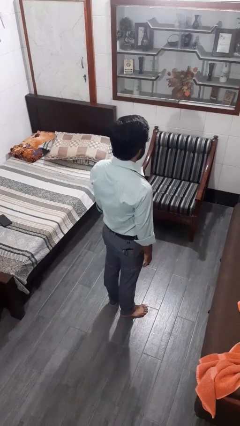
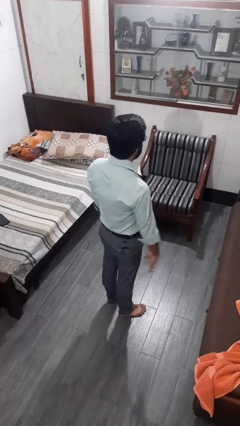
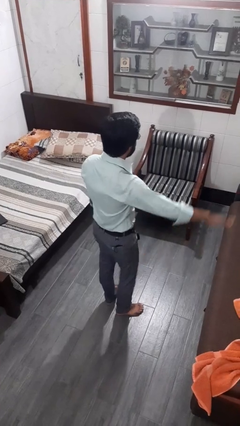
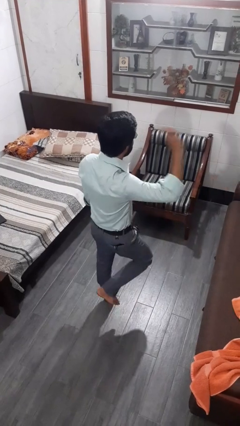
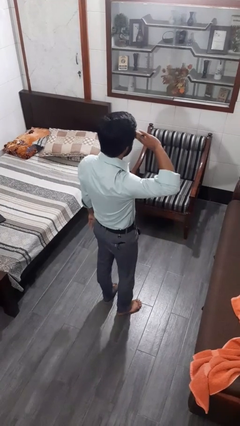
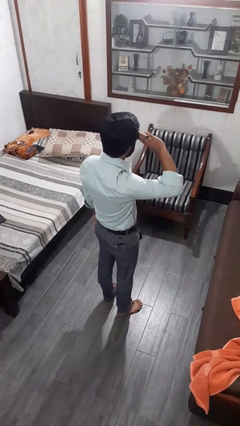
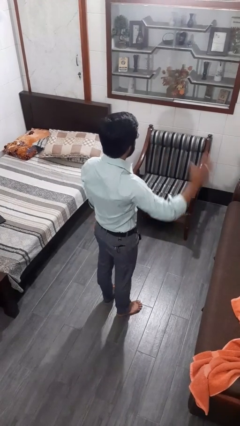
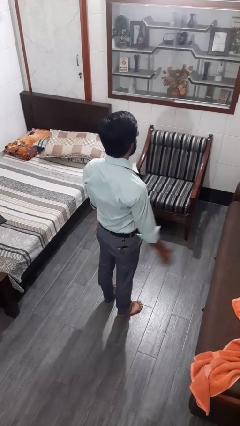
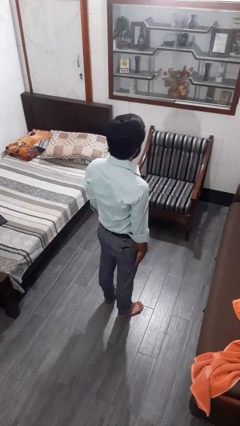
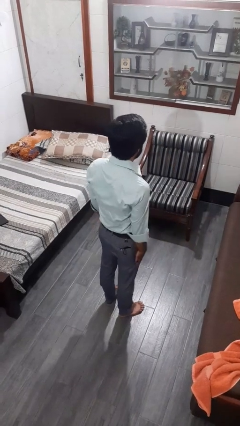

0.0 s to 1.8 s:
person salutes

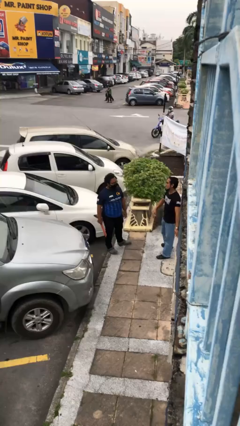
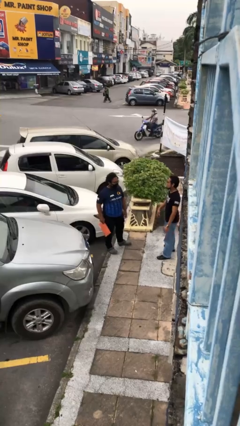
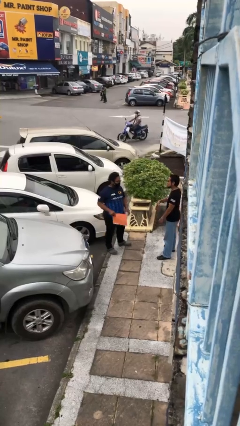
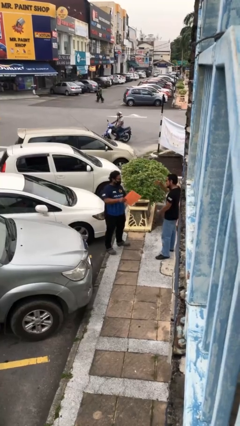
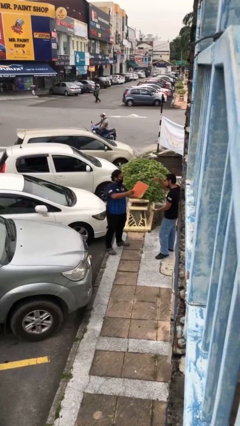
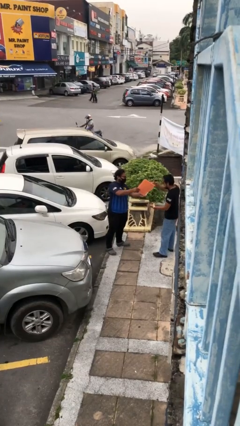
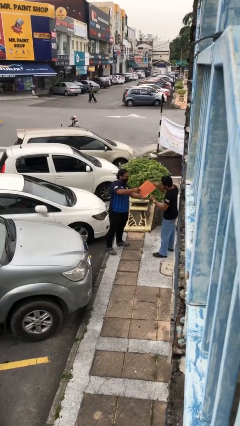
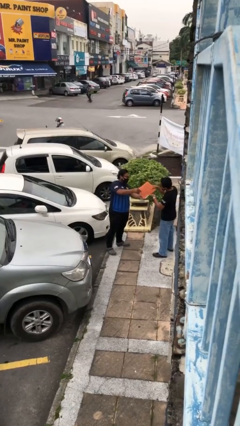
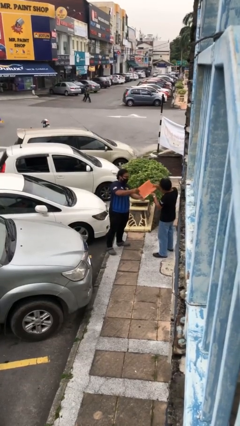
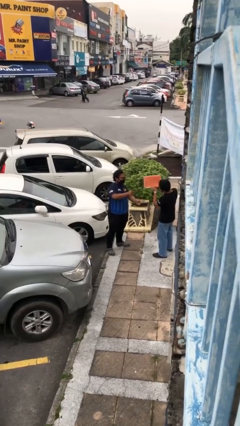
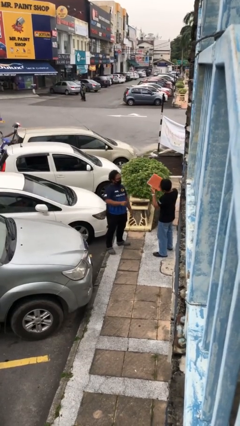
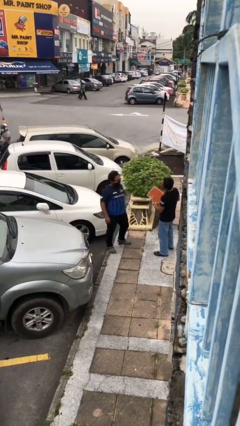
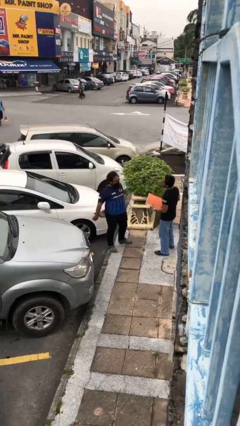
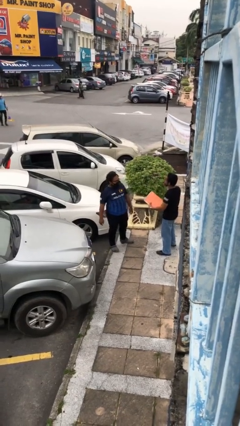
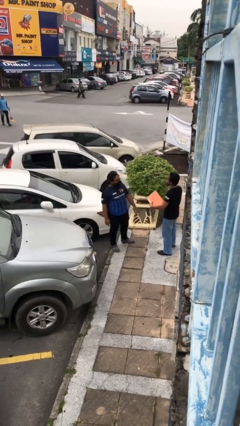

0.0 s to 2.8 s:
person transfers object to person

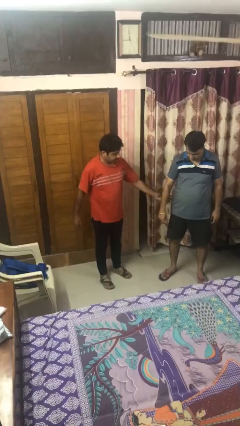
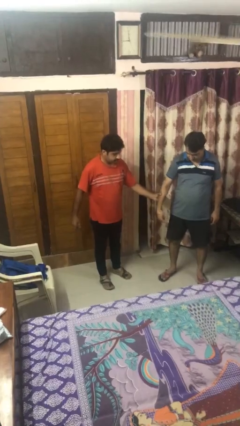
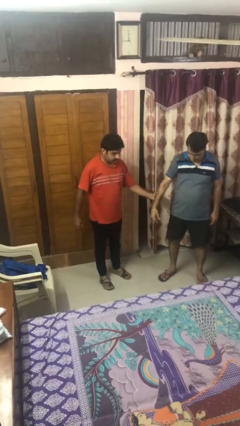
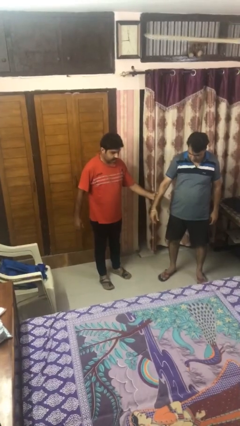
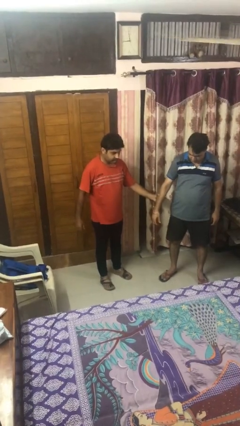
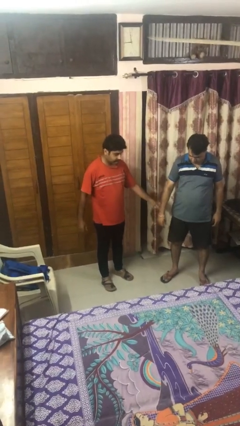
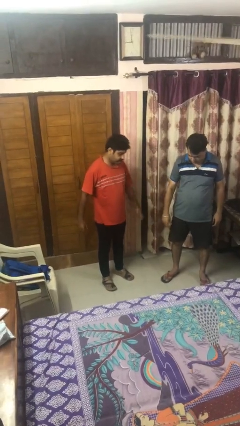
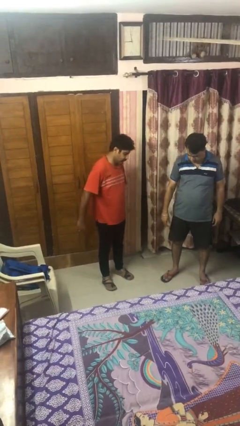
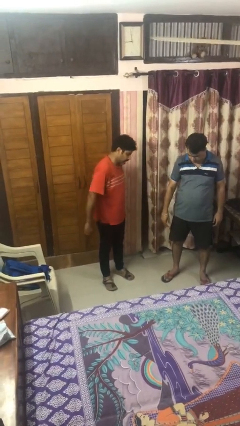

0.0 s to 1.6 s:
person grabs person by forearm

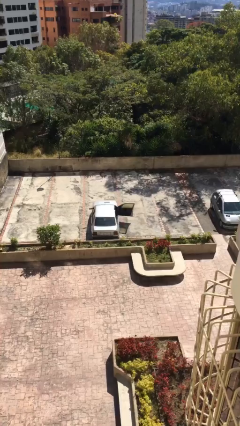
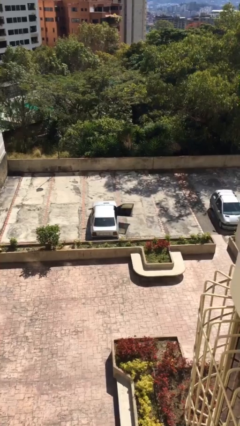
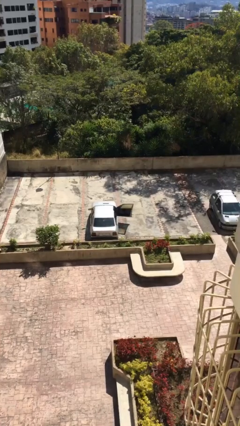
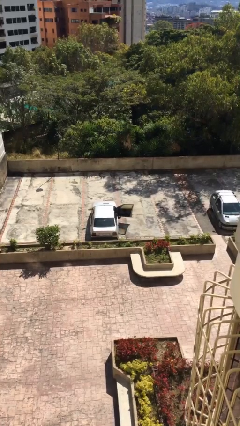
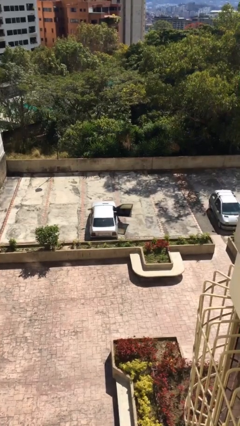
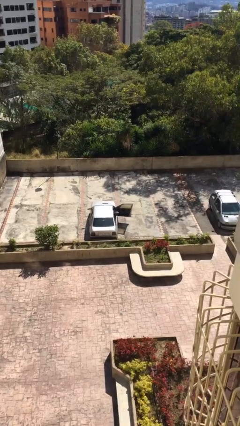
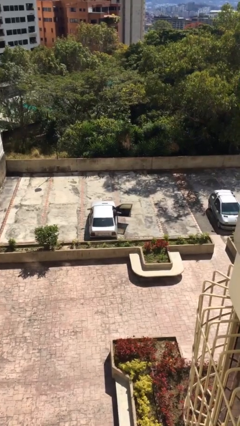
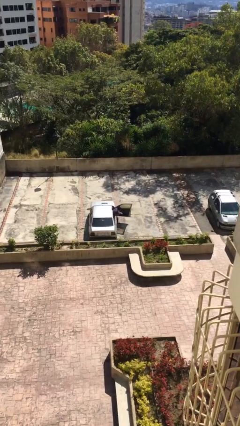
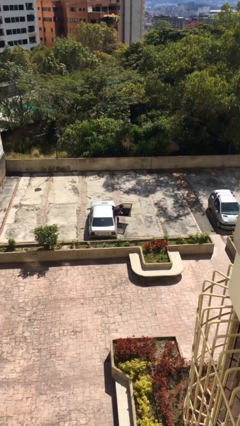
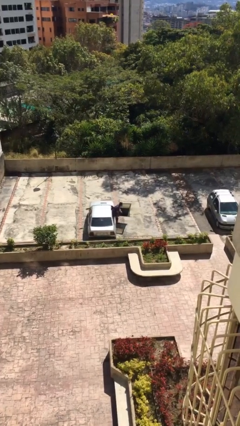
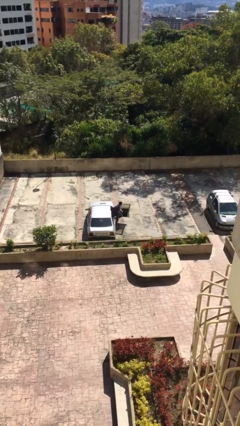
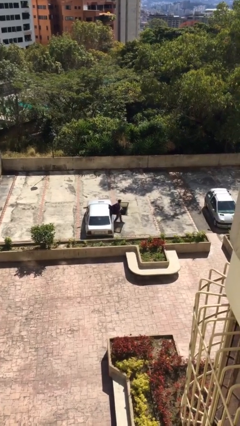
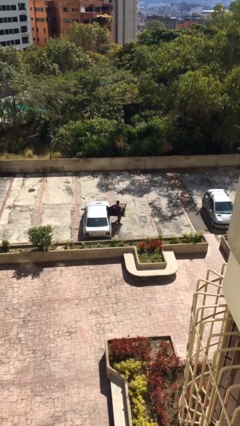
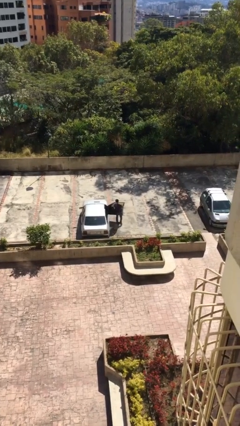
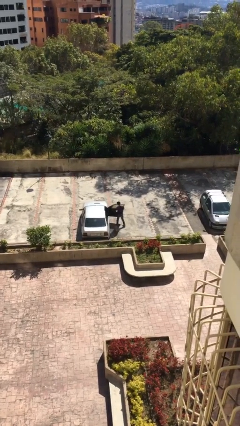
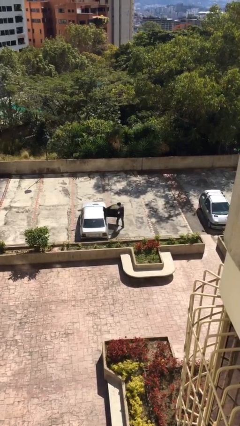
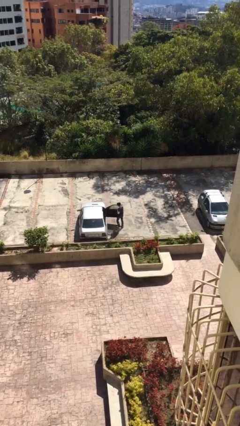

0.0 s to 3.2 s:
person exits car

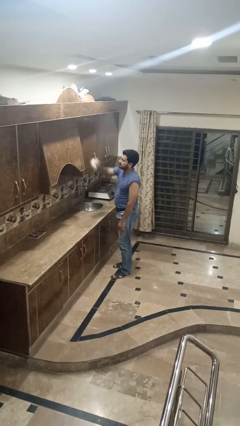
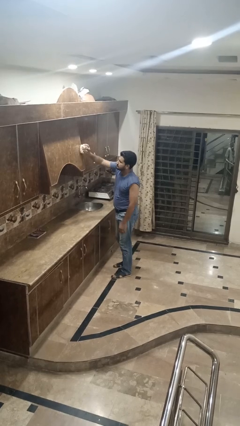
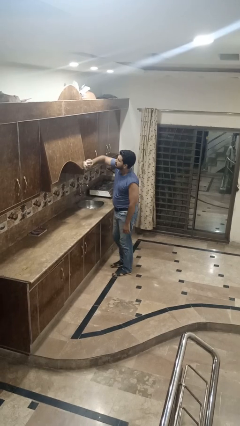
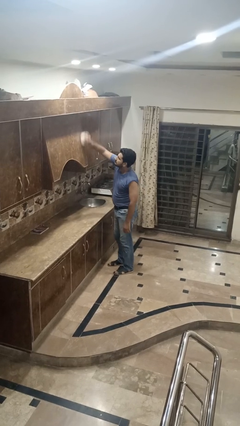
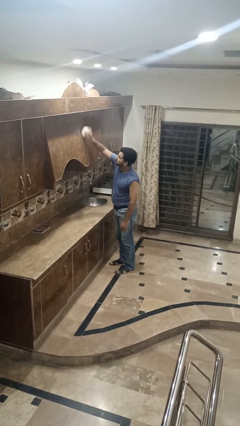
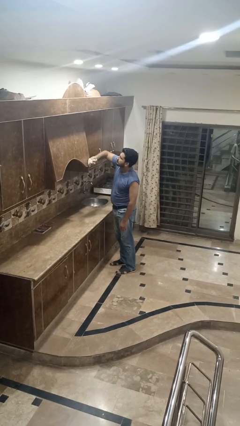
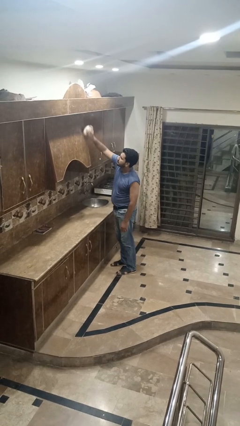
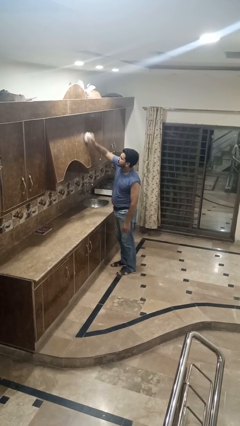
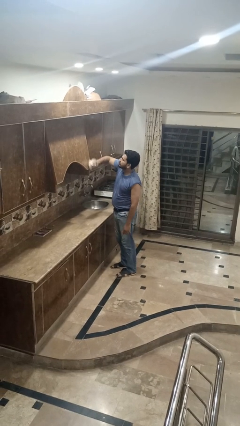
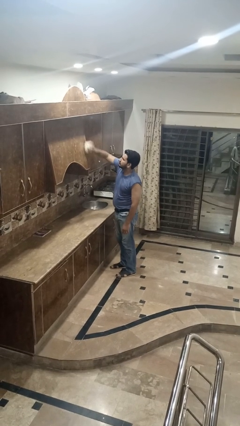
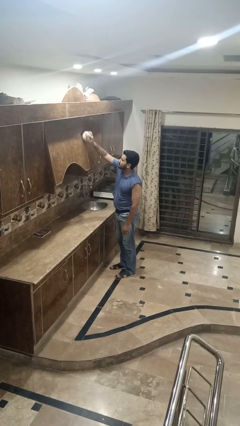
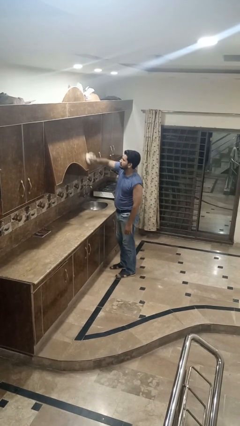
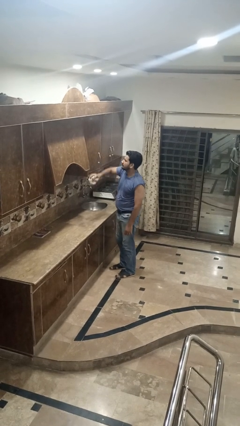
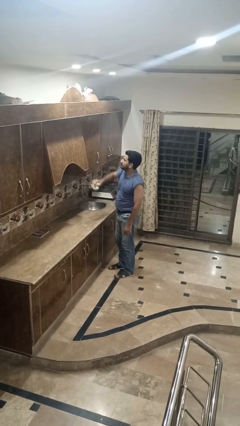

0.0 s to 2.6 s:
person dusts furniture

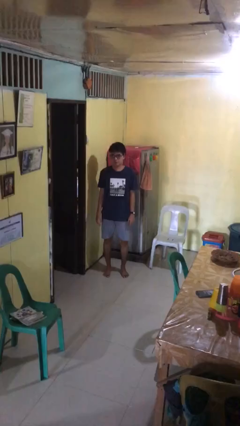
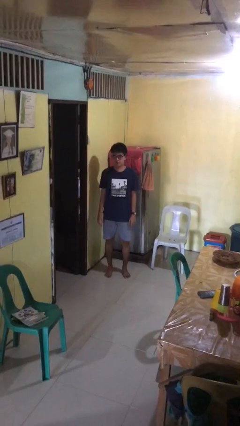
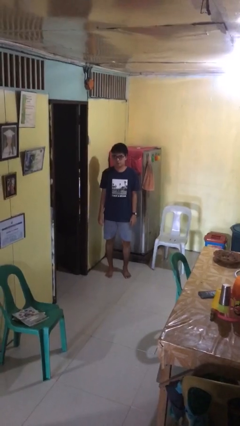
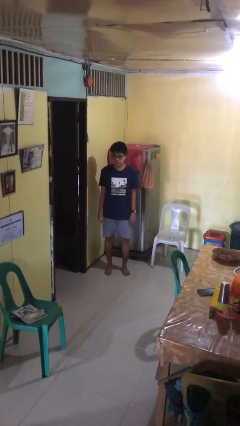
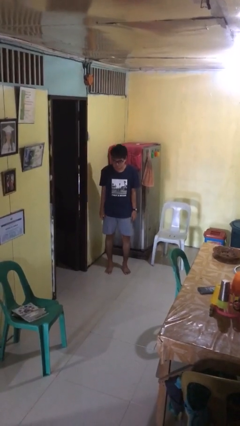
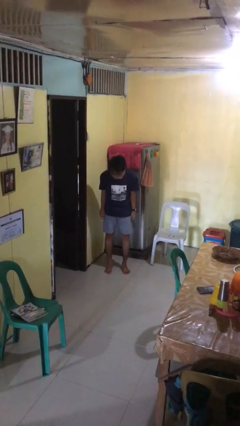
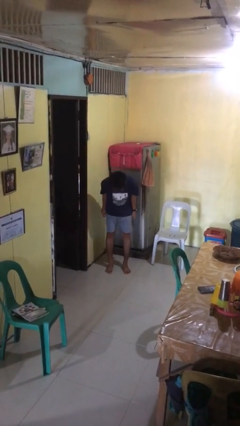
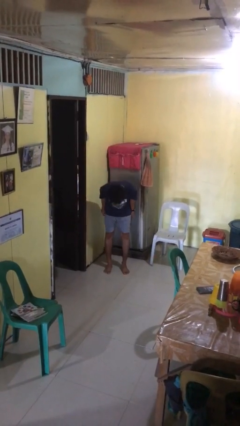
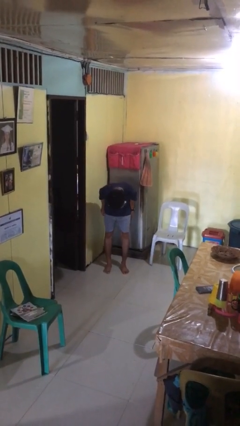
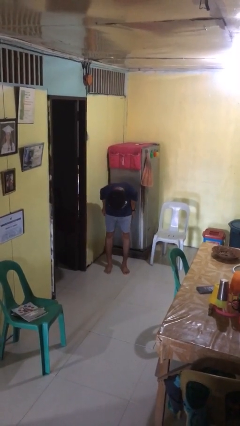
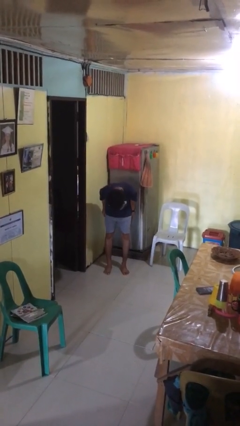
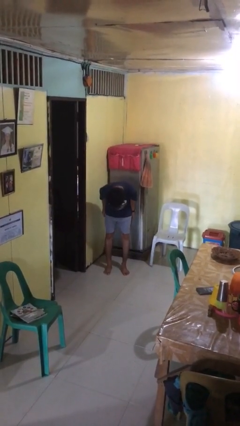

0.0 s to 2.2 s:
person bows

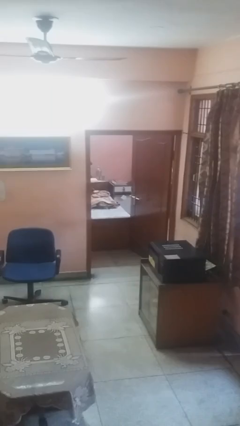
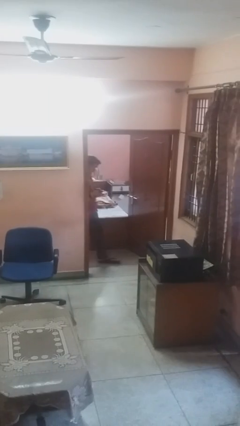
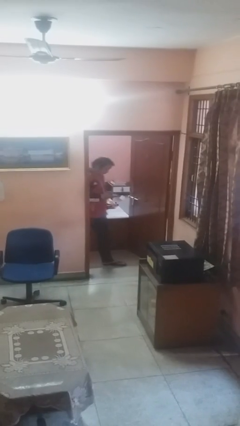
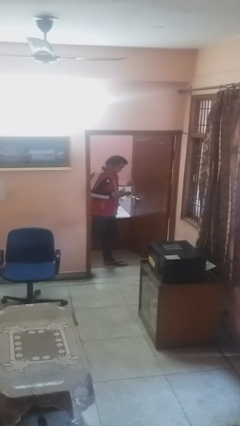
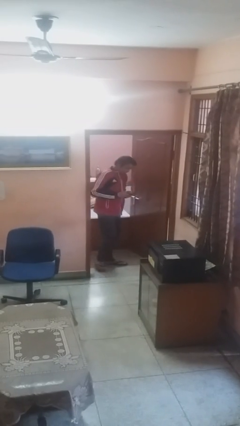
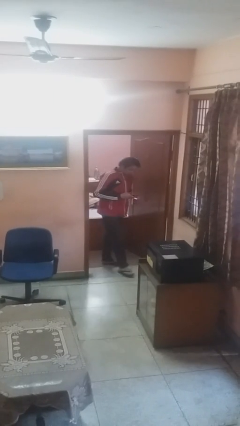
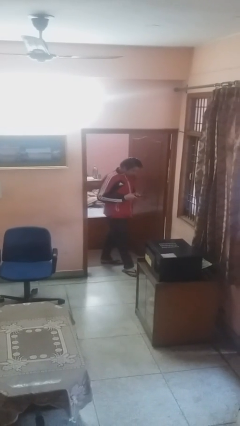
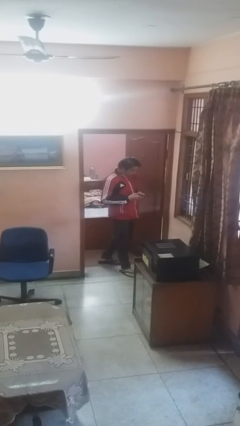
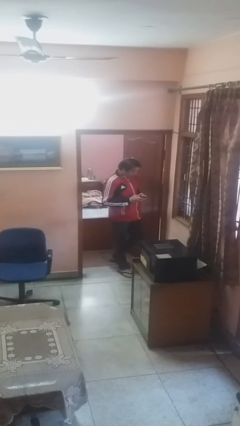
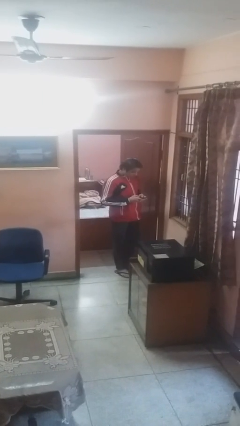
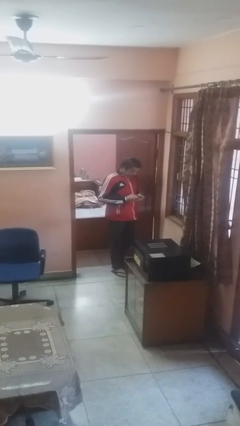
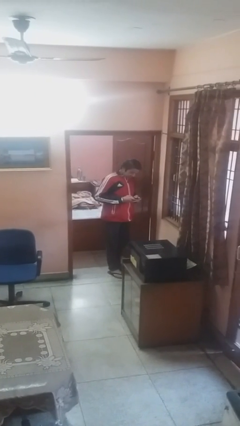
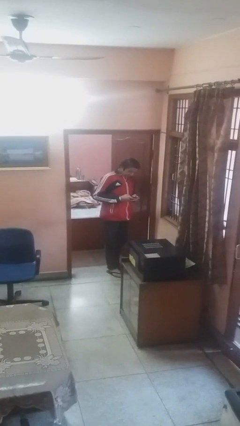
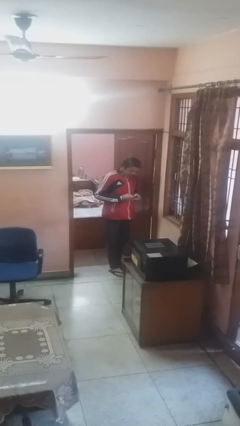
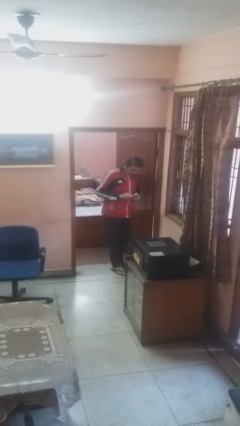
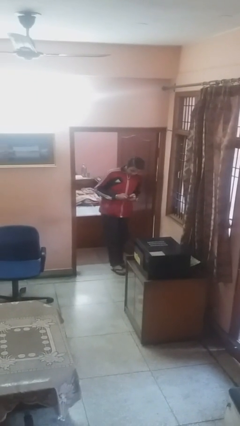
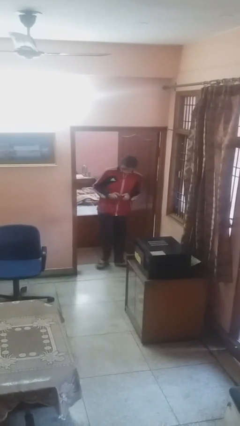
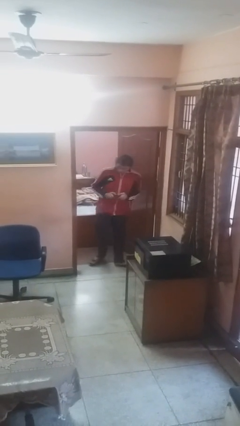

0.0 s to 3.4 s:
person enters scene through structure
